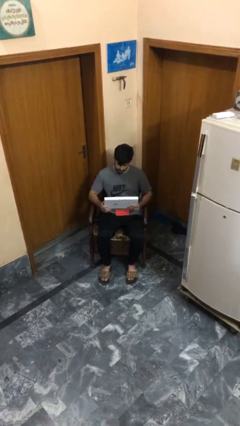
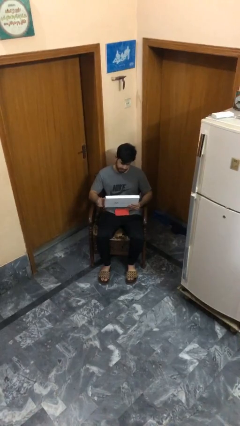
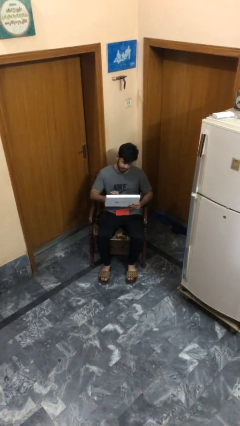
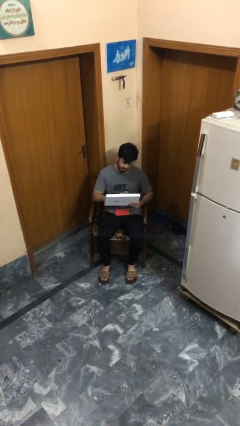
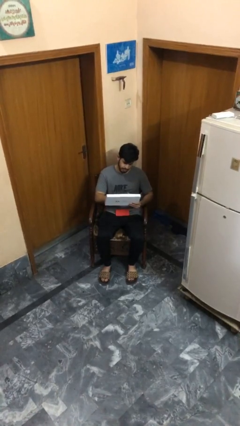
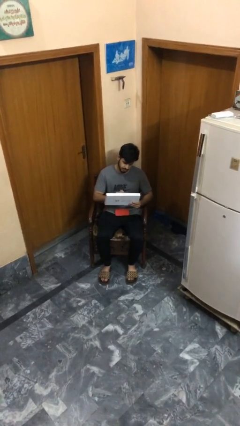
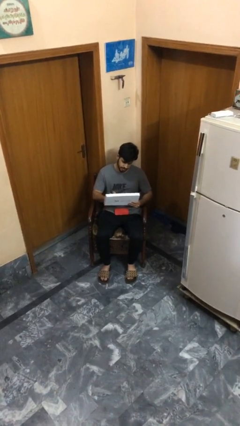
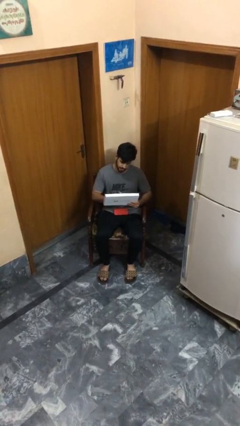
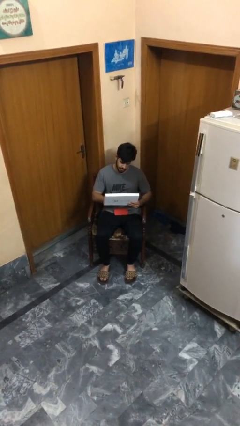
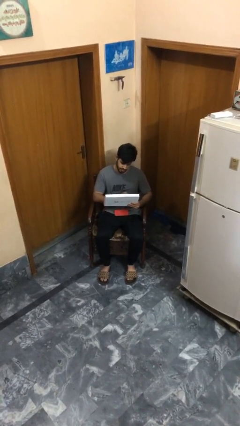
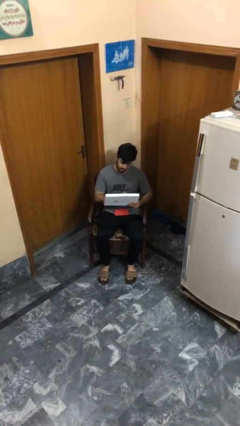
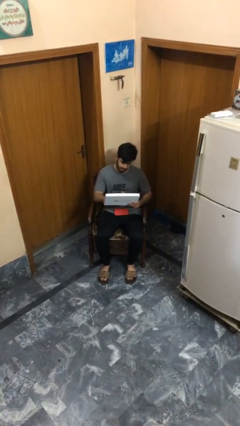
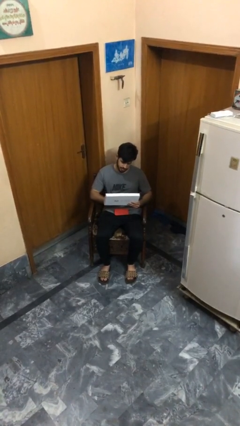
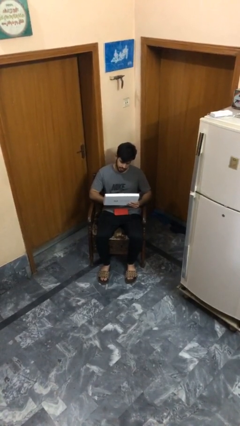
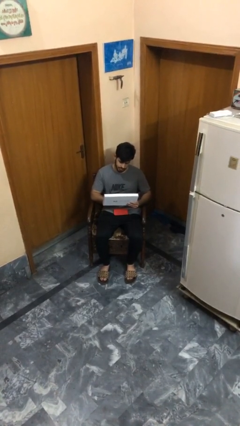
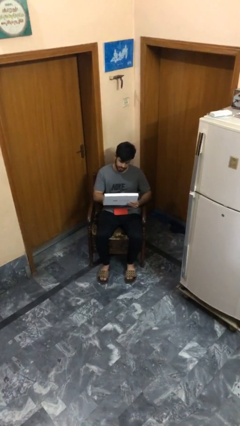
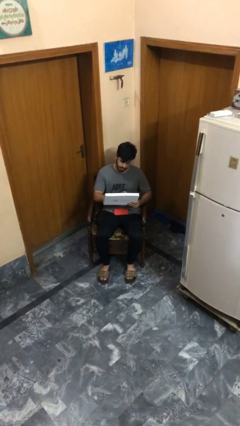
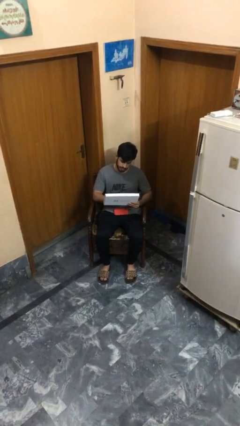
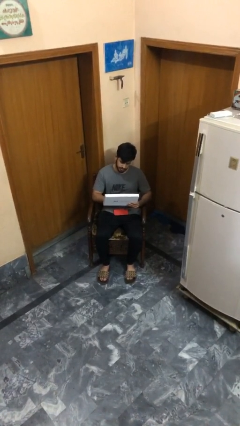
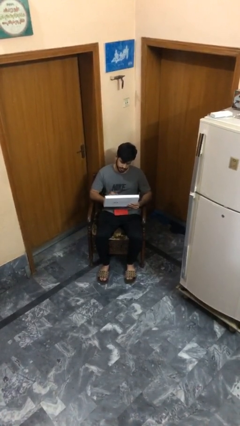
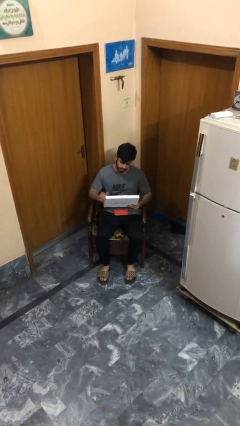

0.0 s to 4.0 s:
person interacts with tablet

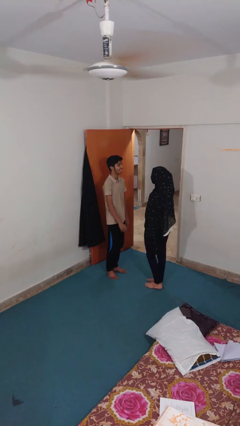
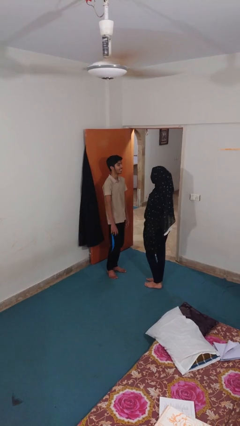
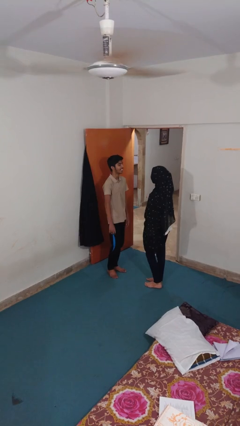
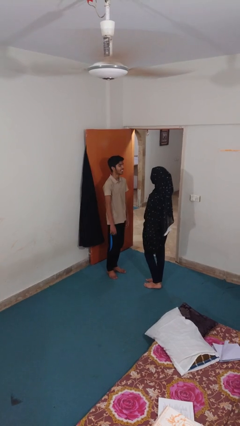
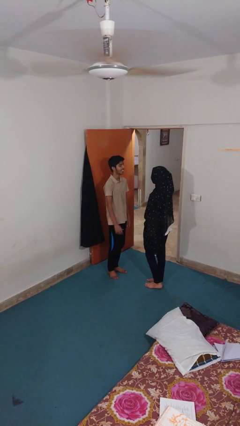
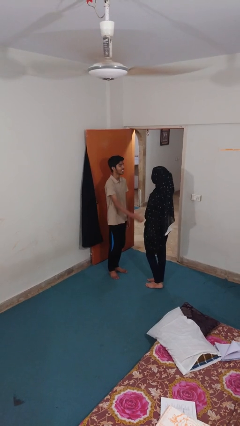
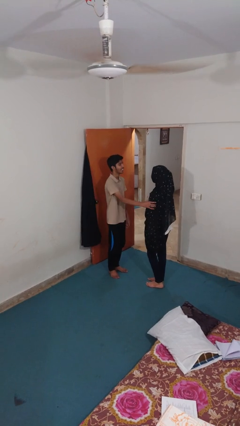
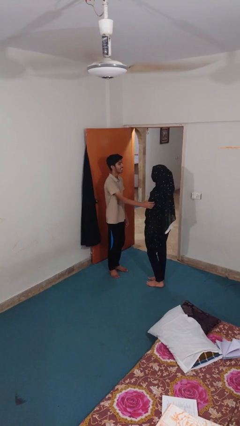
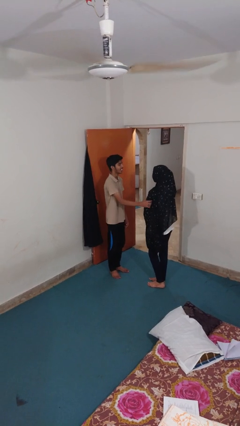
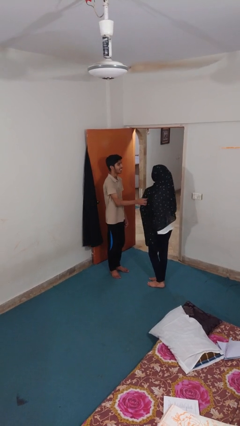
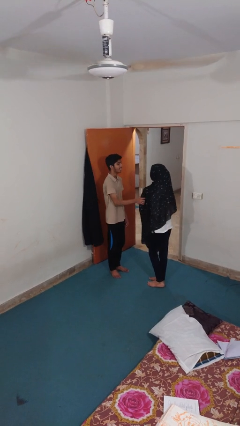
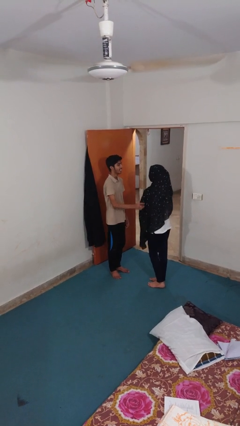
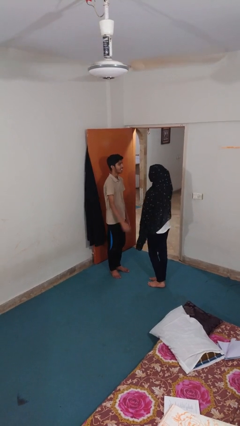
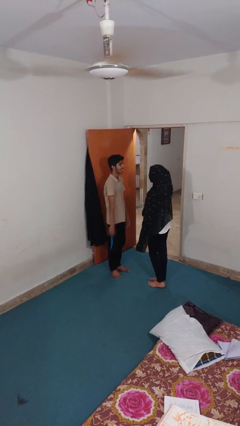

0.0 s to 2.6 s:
person grabs person by bicep

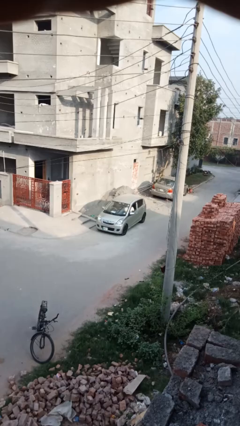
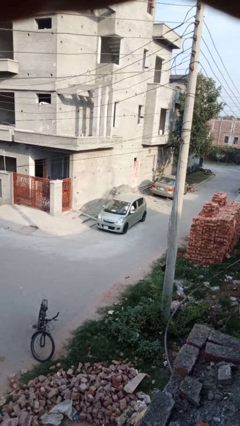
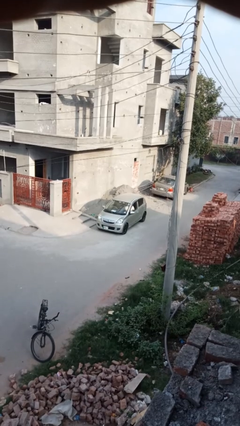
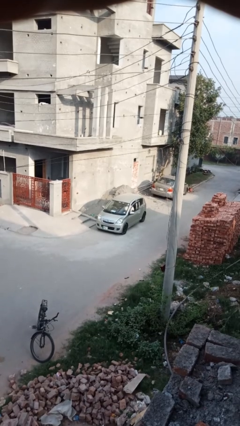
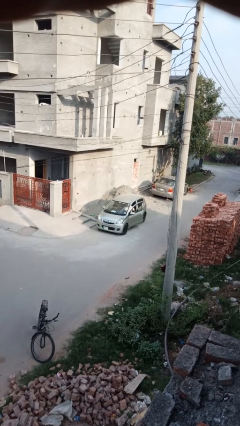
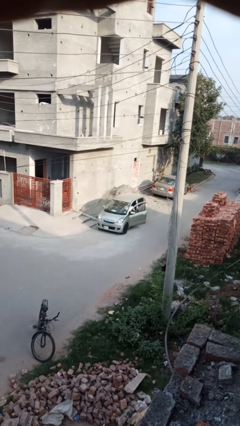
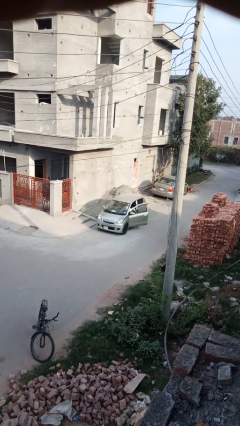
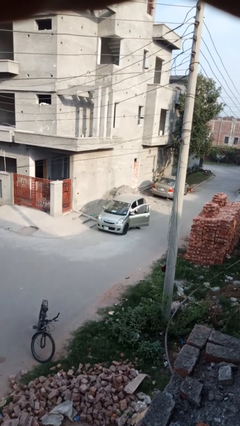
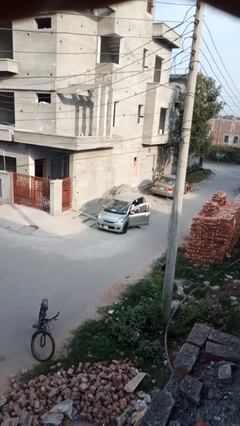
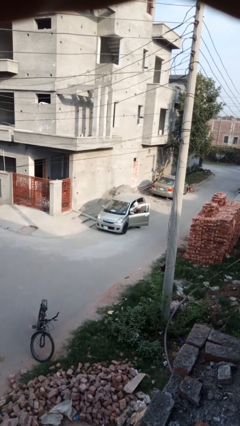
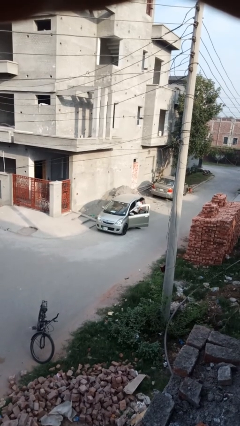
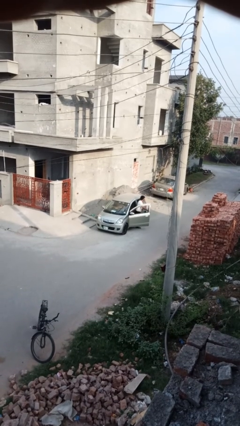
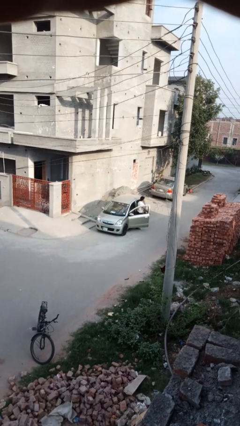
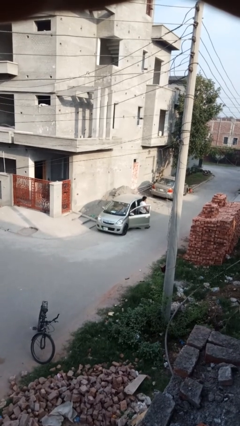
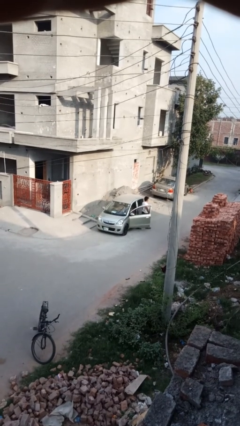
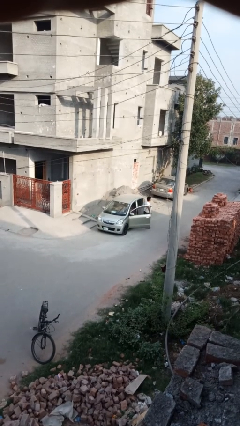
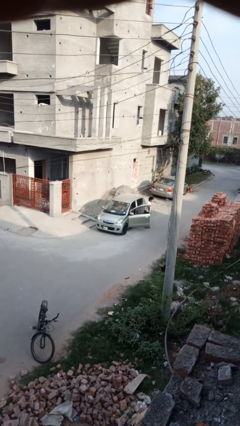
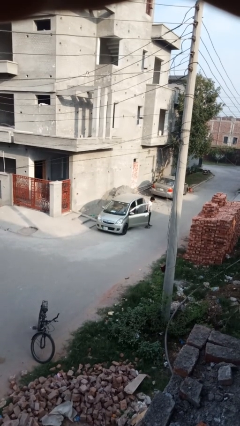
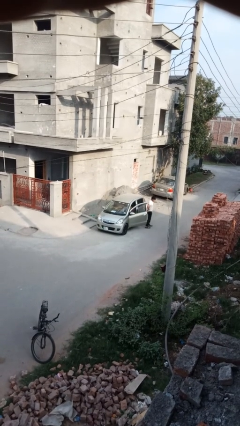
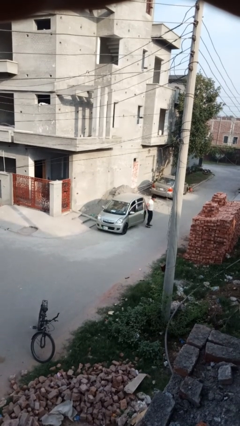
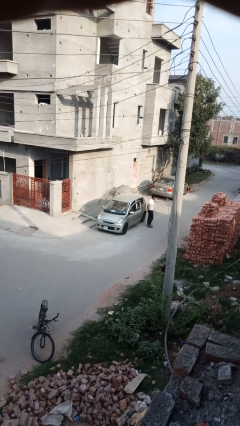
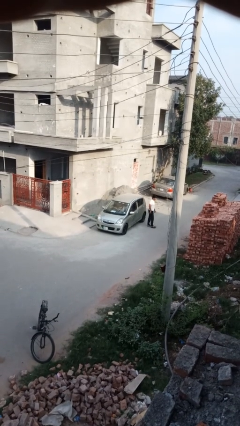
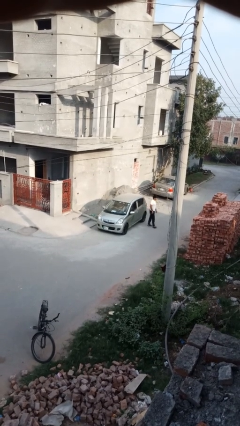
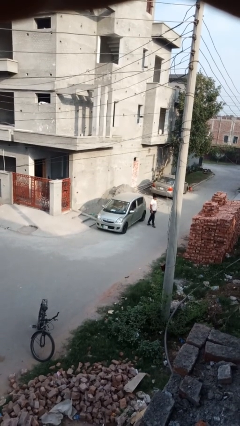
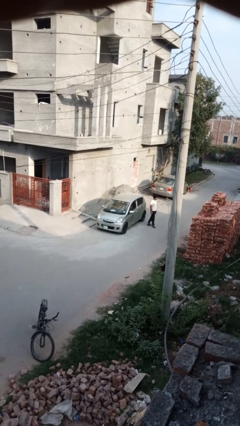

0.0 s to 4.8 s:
car drops off person

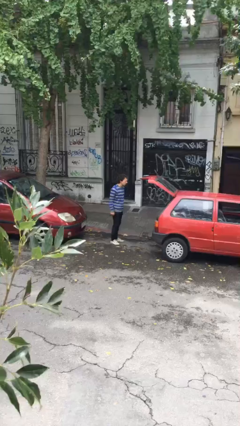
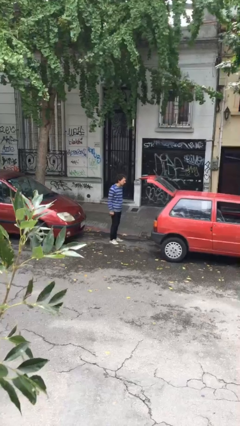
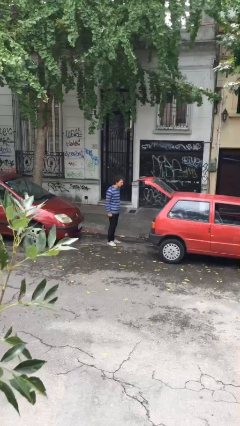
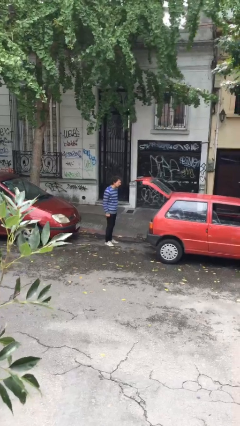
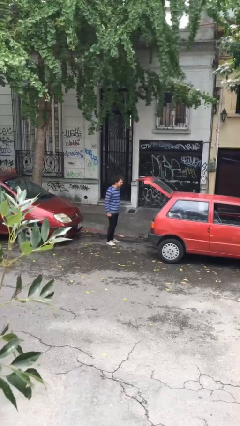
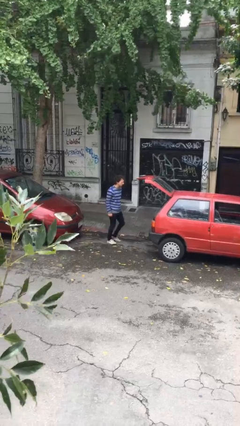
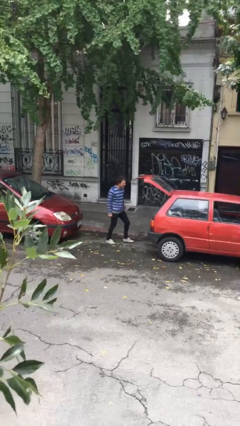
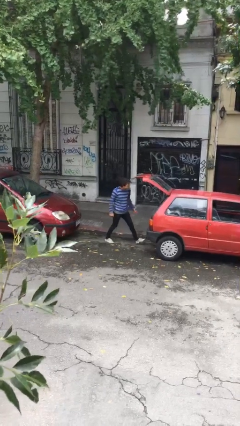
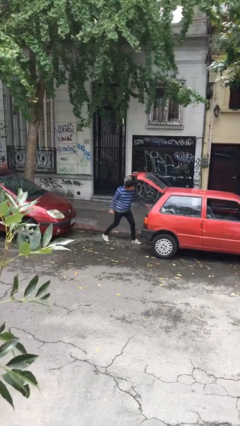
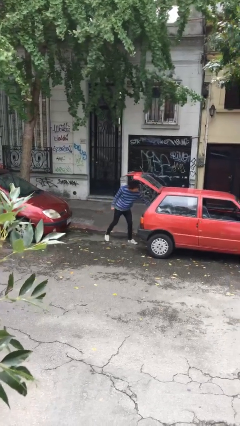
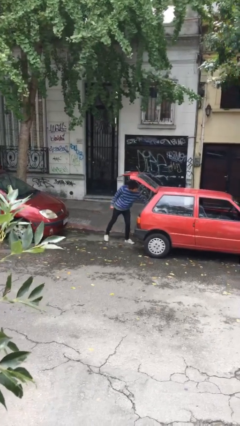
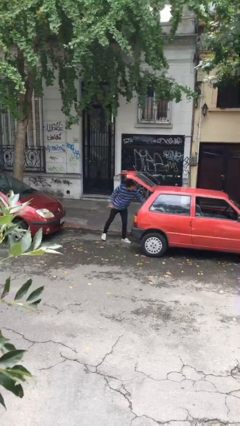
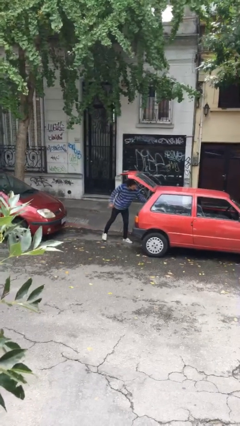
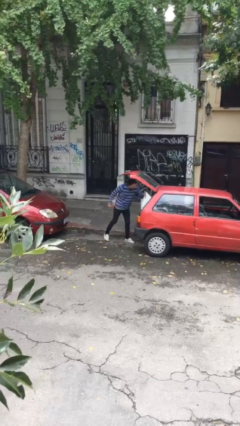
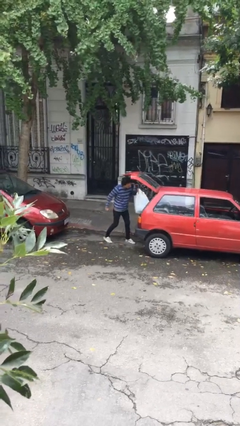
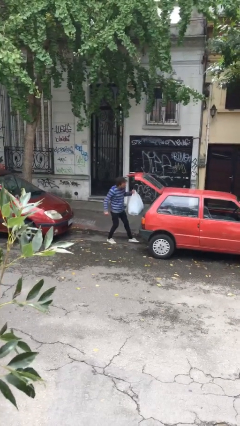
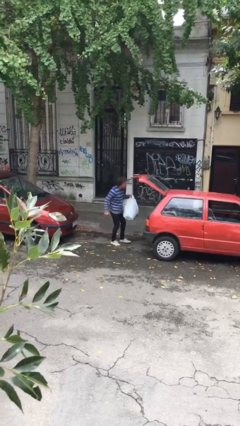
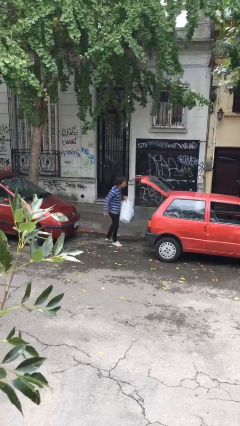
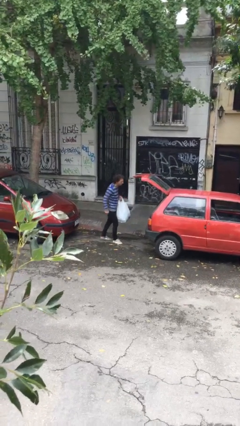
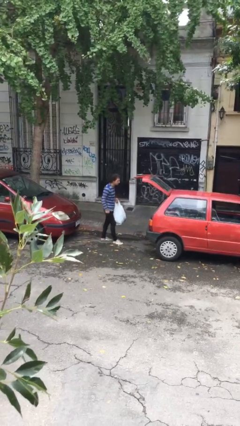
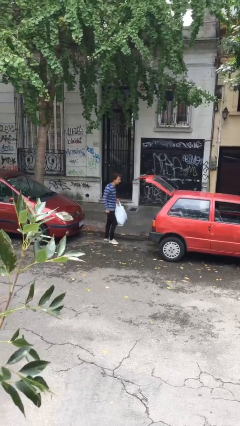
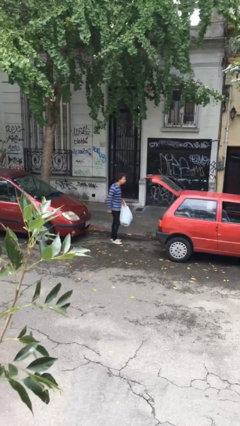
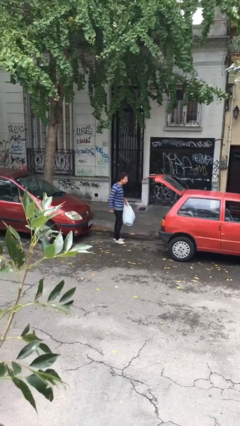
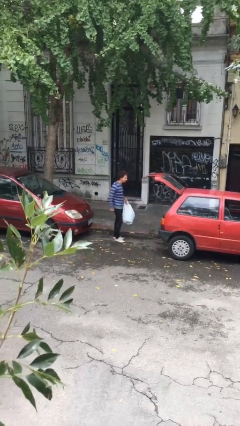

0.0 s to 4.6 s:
person unloads car

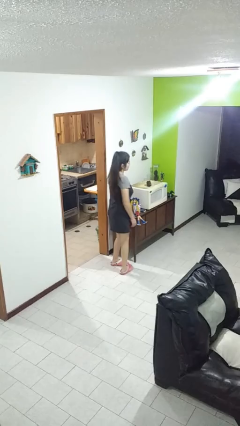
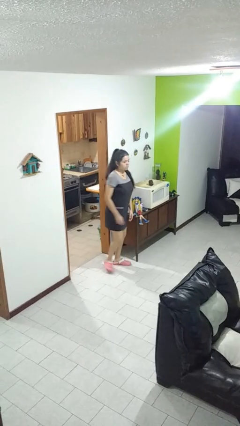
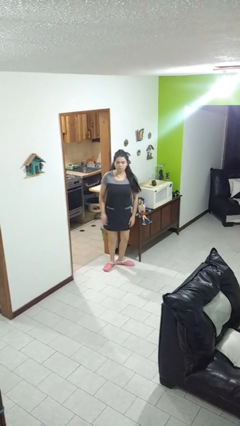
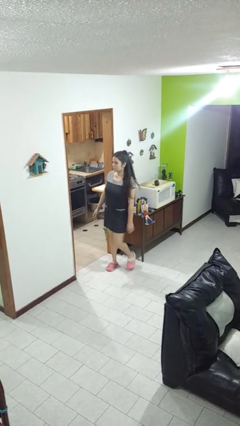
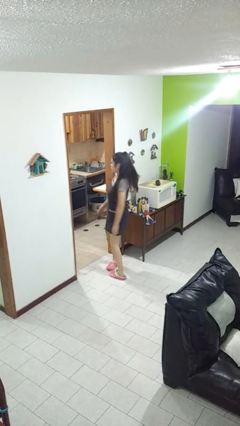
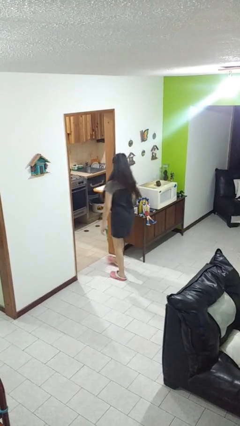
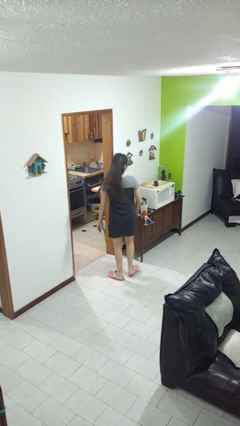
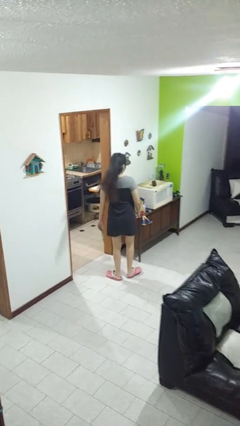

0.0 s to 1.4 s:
person twirls
